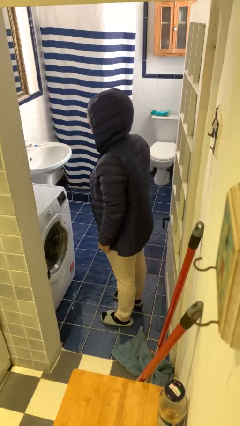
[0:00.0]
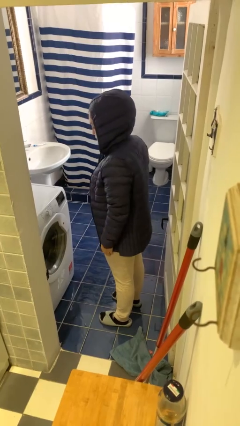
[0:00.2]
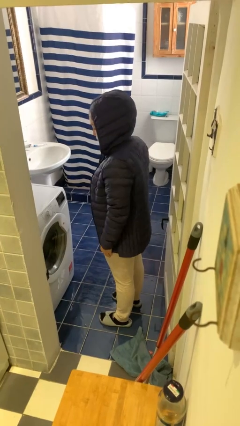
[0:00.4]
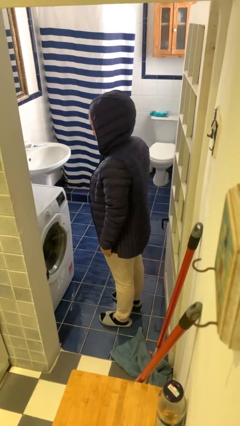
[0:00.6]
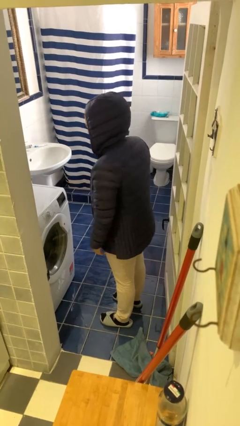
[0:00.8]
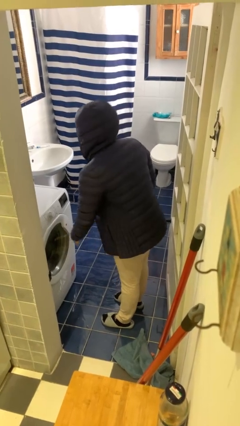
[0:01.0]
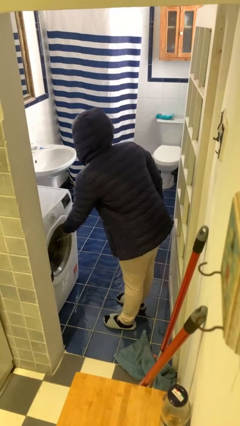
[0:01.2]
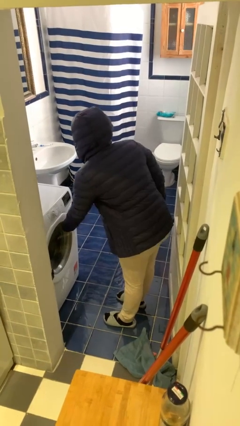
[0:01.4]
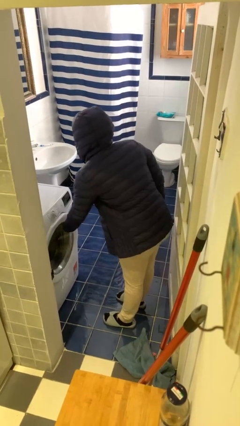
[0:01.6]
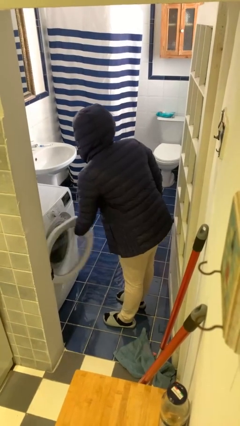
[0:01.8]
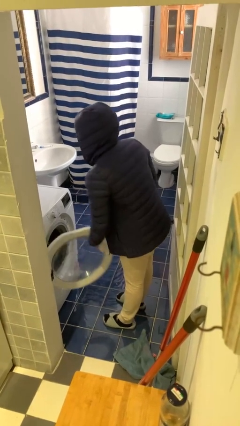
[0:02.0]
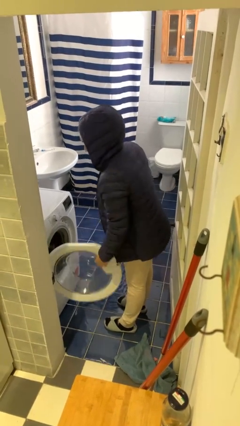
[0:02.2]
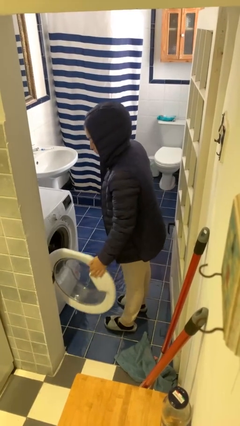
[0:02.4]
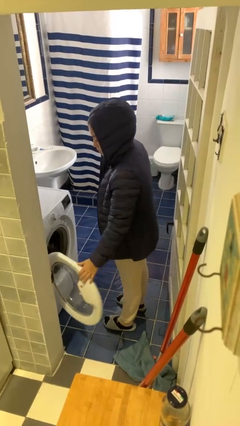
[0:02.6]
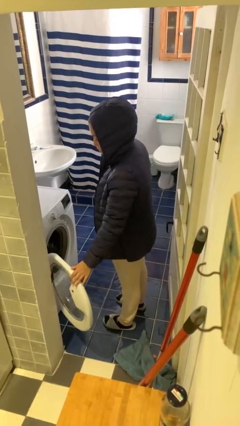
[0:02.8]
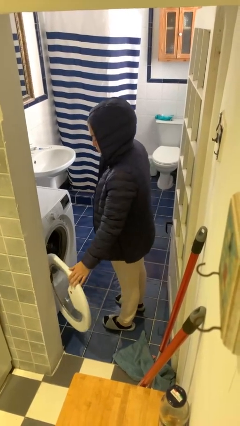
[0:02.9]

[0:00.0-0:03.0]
person opens clothes washer

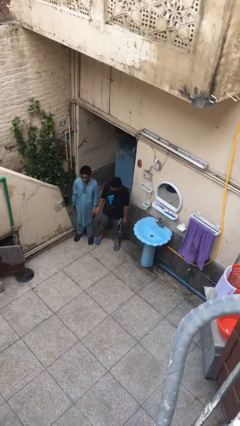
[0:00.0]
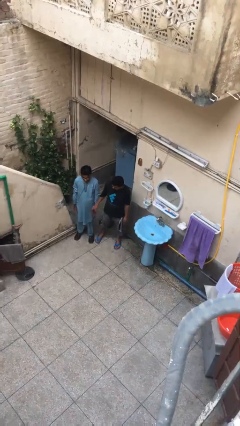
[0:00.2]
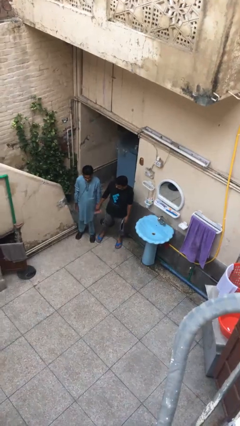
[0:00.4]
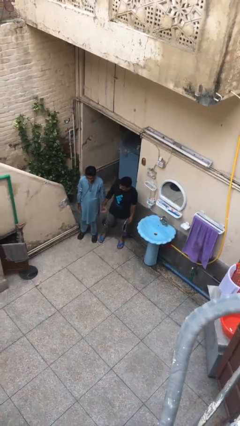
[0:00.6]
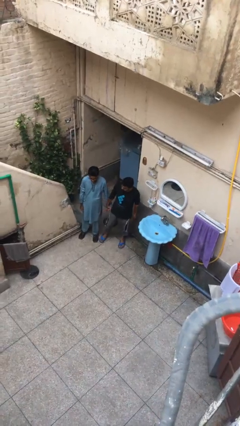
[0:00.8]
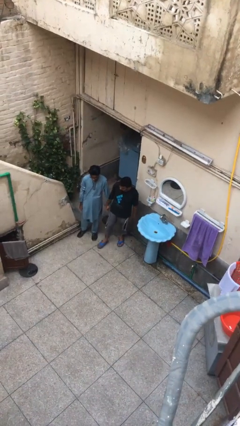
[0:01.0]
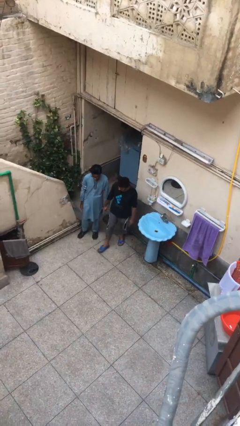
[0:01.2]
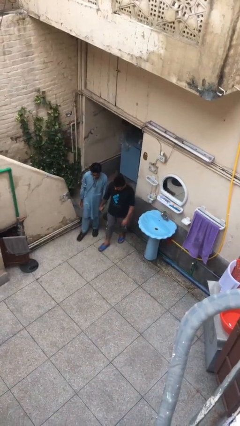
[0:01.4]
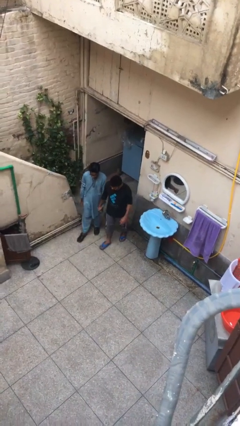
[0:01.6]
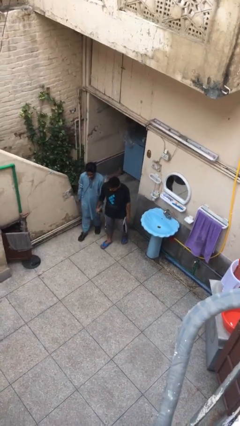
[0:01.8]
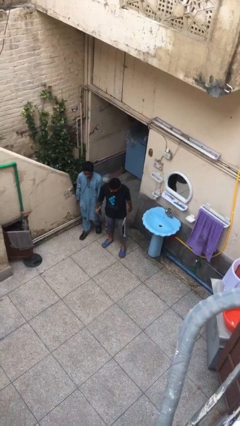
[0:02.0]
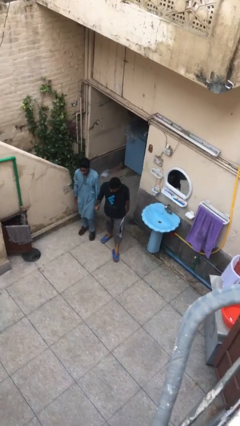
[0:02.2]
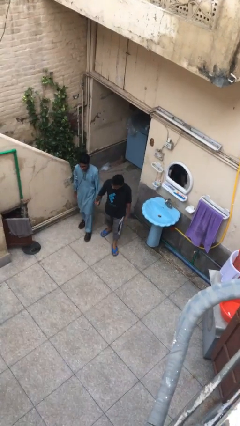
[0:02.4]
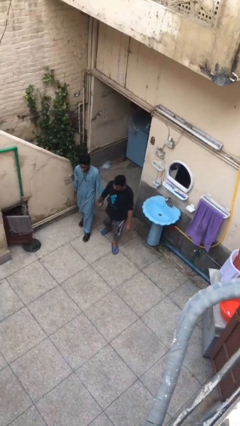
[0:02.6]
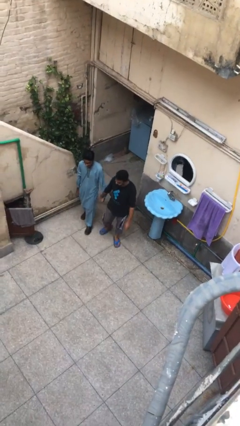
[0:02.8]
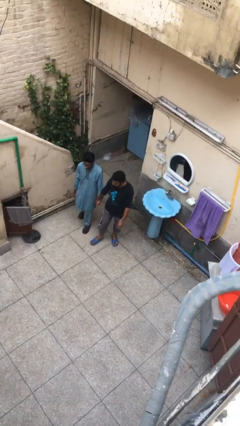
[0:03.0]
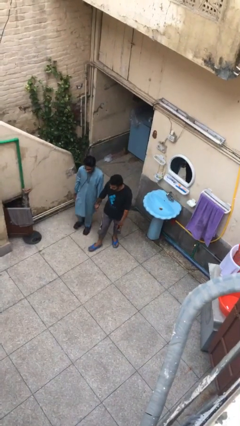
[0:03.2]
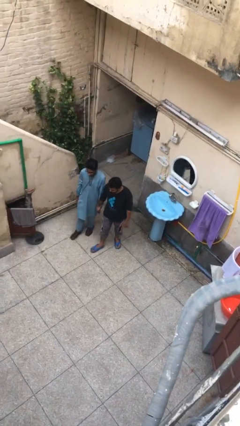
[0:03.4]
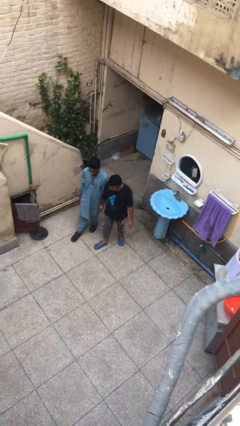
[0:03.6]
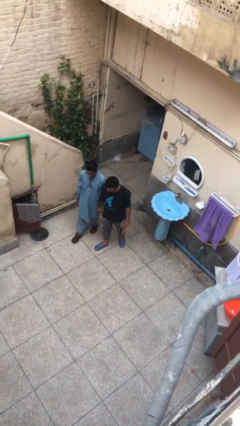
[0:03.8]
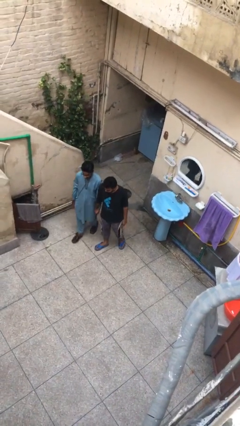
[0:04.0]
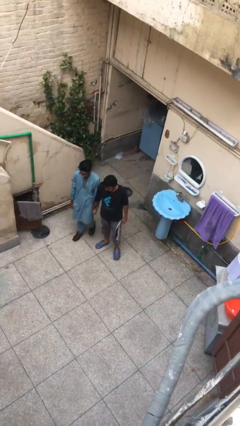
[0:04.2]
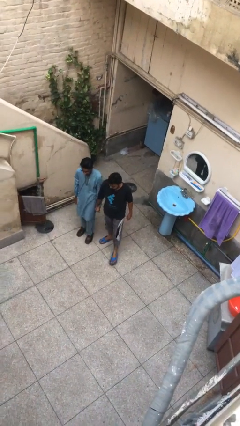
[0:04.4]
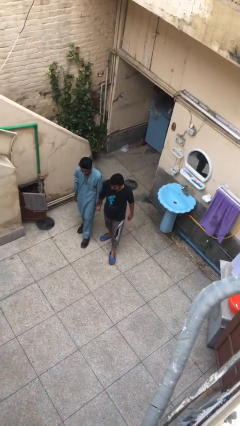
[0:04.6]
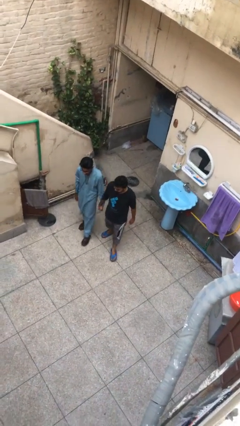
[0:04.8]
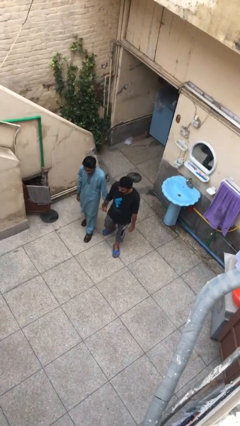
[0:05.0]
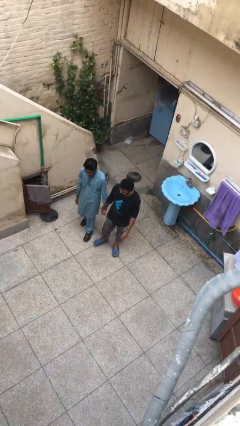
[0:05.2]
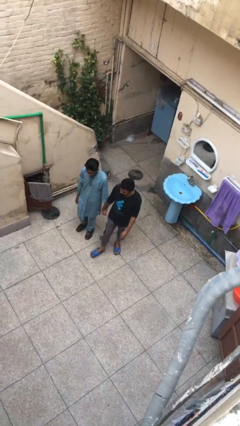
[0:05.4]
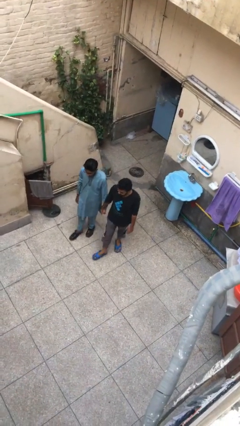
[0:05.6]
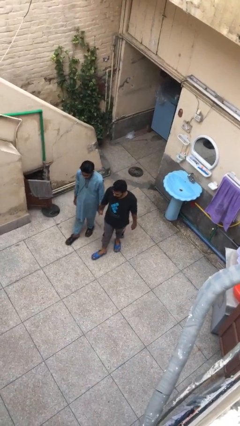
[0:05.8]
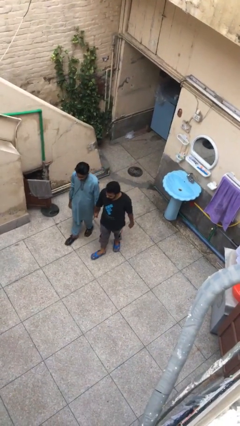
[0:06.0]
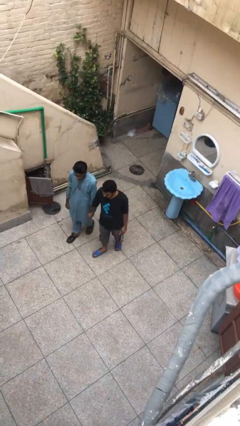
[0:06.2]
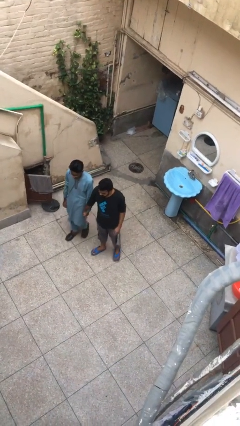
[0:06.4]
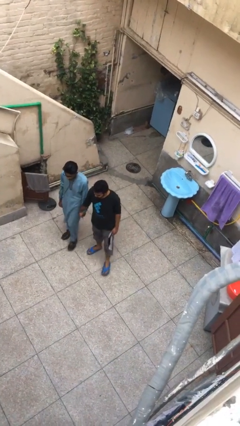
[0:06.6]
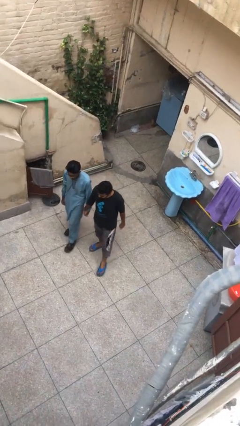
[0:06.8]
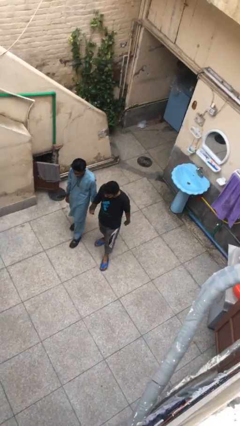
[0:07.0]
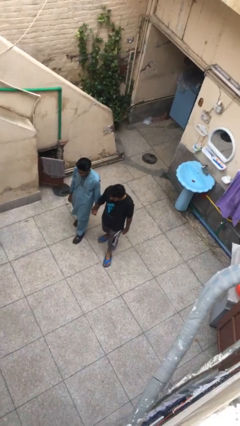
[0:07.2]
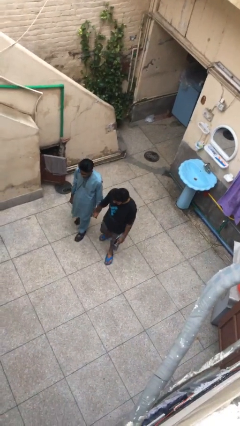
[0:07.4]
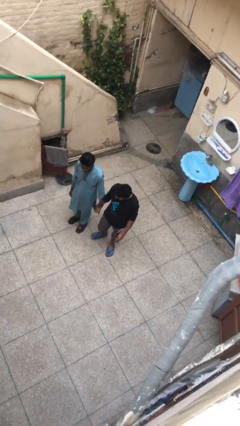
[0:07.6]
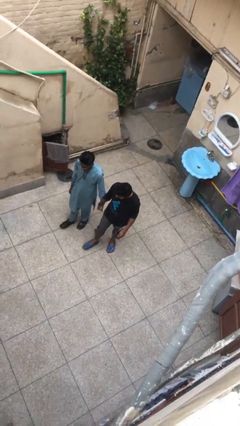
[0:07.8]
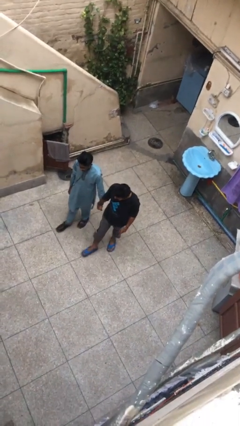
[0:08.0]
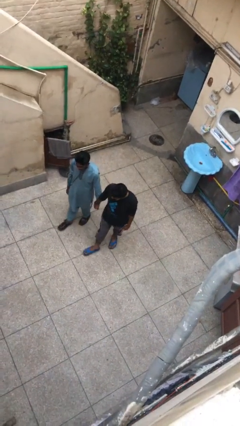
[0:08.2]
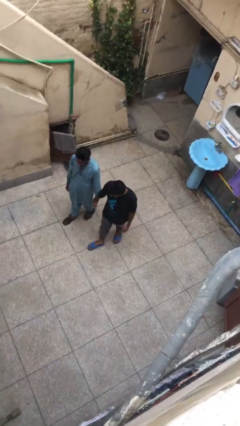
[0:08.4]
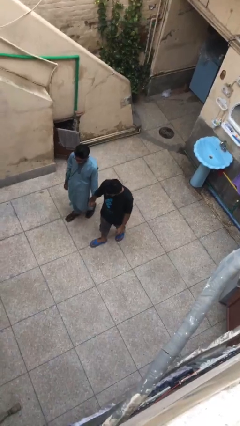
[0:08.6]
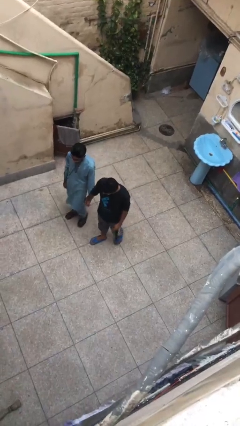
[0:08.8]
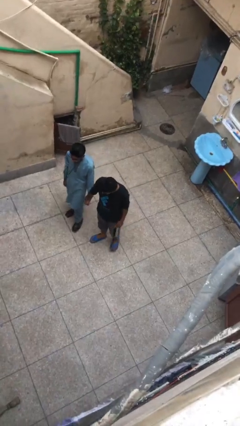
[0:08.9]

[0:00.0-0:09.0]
person holds hand

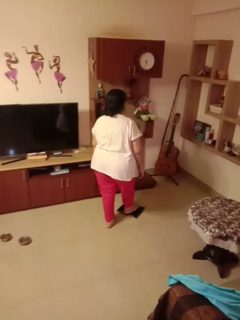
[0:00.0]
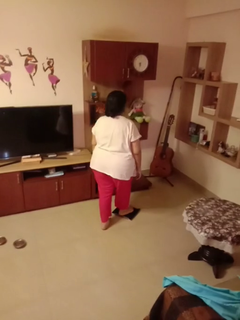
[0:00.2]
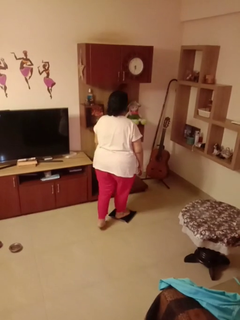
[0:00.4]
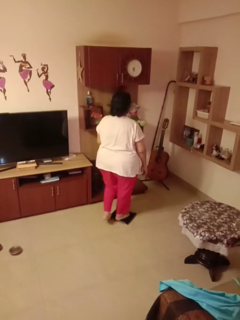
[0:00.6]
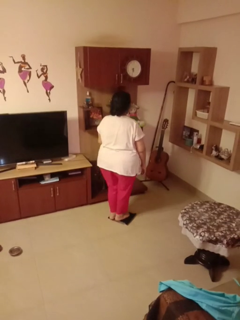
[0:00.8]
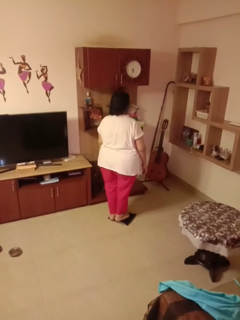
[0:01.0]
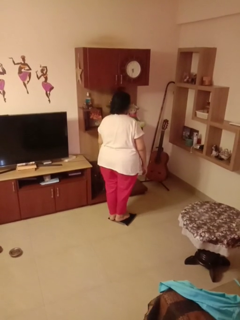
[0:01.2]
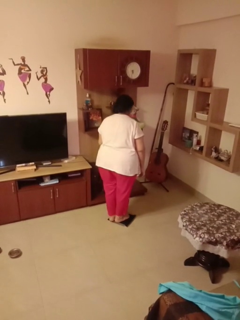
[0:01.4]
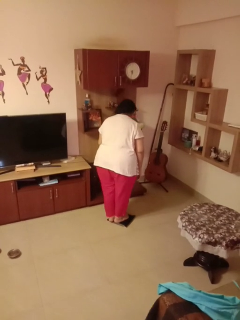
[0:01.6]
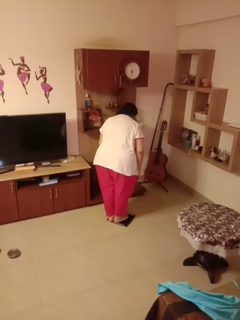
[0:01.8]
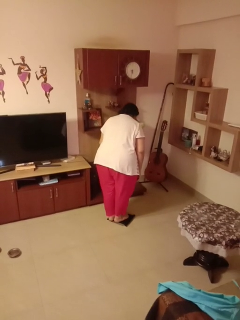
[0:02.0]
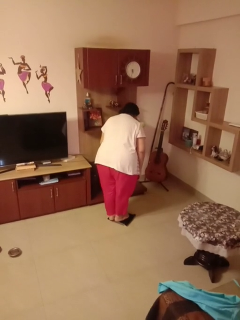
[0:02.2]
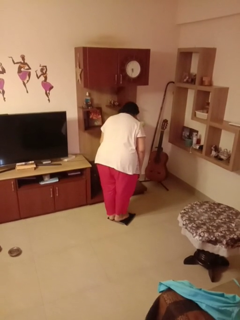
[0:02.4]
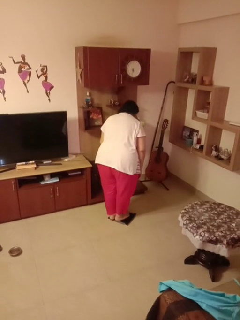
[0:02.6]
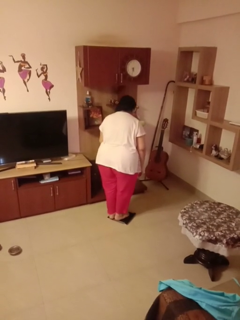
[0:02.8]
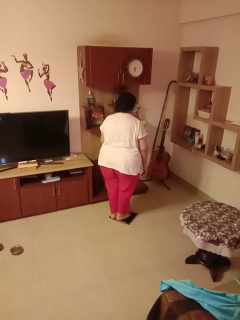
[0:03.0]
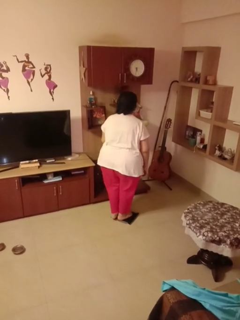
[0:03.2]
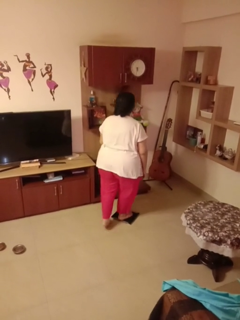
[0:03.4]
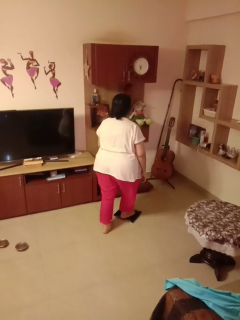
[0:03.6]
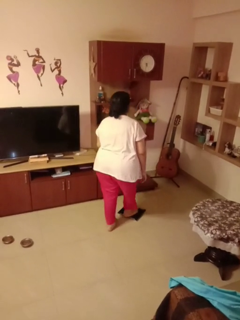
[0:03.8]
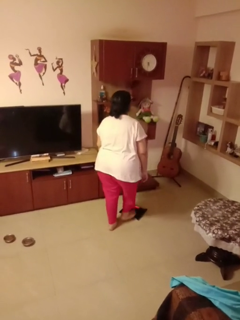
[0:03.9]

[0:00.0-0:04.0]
person uses bodyweight scale

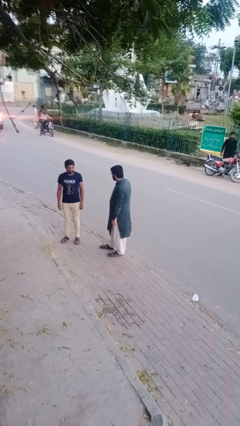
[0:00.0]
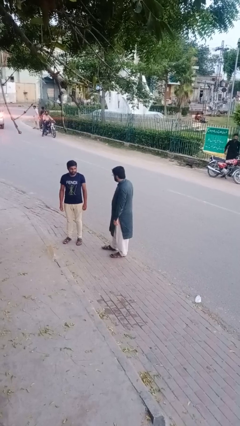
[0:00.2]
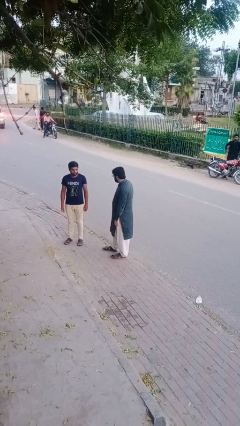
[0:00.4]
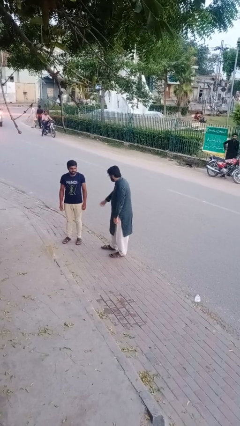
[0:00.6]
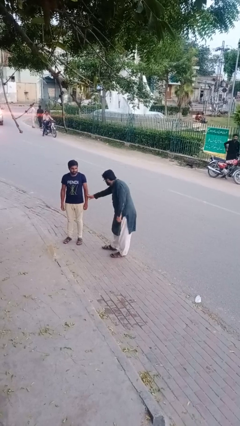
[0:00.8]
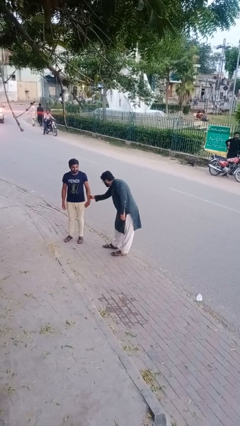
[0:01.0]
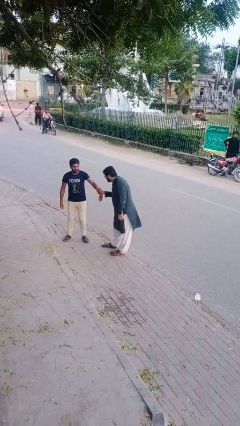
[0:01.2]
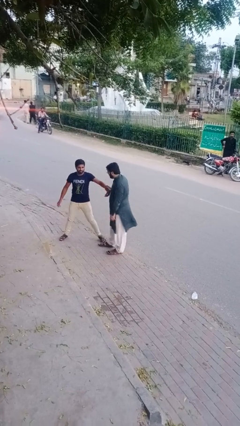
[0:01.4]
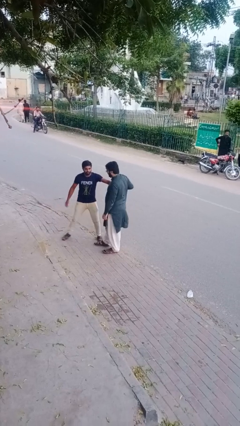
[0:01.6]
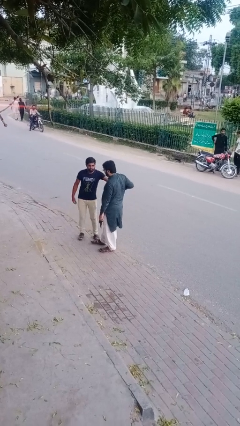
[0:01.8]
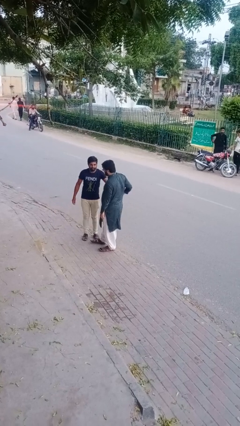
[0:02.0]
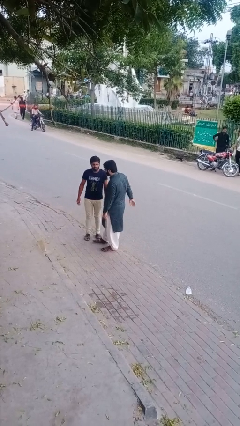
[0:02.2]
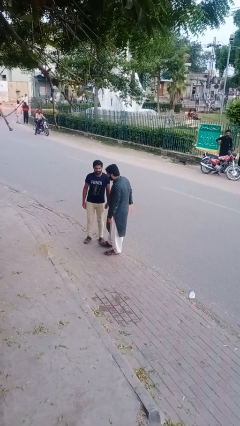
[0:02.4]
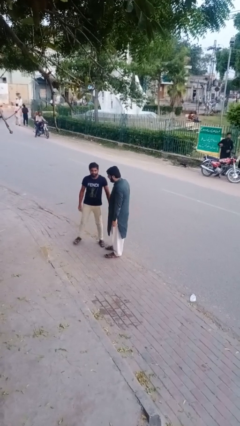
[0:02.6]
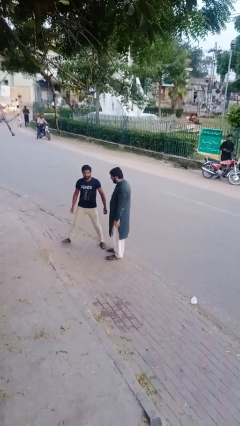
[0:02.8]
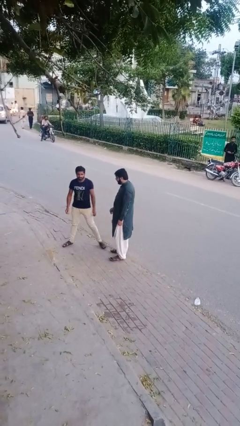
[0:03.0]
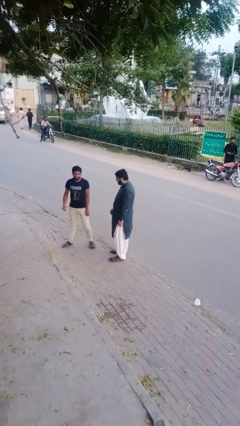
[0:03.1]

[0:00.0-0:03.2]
person grabs person by forearm
